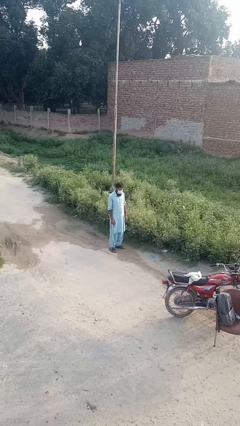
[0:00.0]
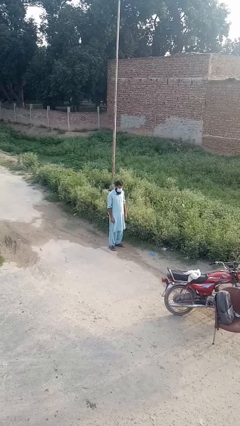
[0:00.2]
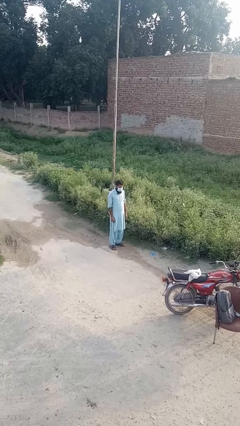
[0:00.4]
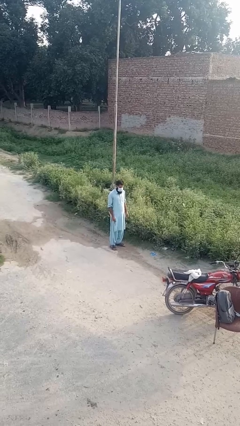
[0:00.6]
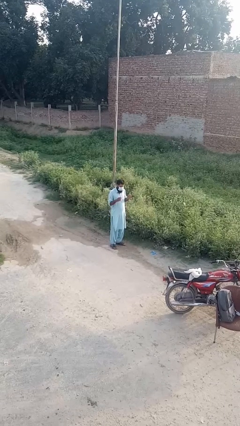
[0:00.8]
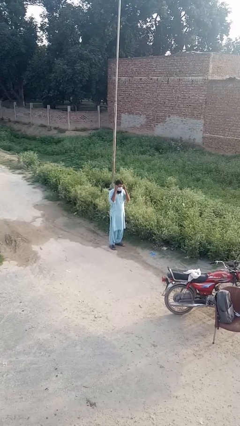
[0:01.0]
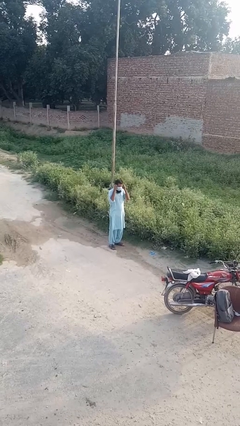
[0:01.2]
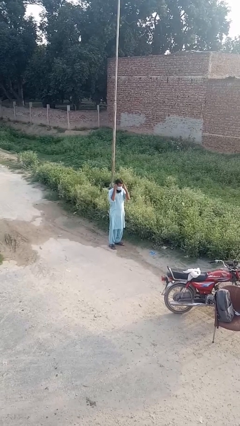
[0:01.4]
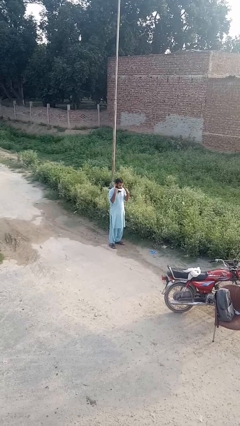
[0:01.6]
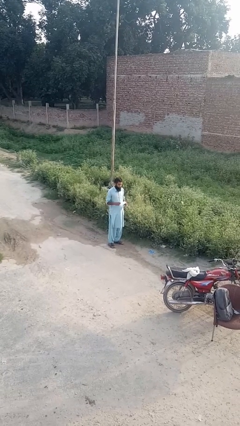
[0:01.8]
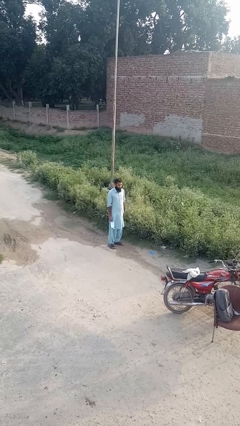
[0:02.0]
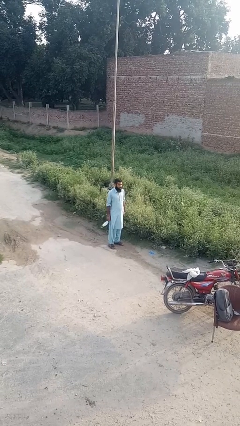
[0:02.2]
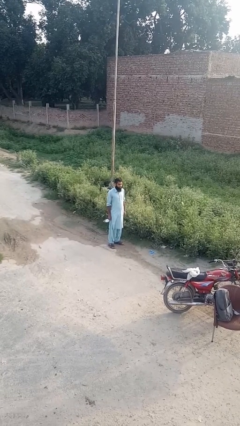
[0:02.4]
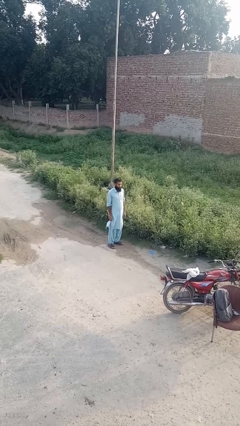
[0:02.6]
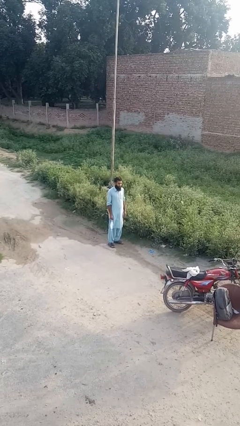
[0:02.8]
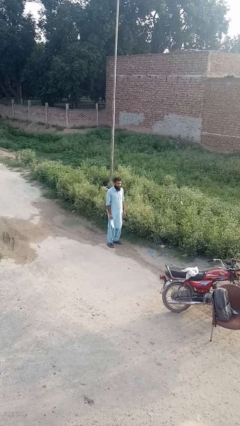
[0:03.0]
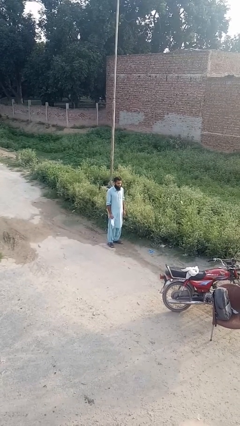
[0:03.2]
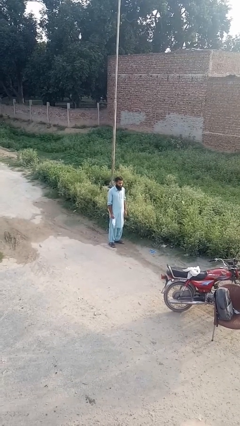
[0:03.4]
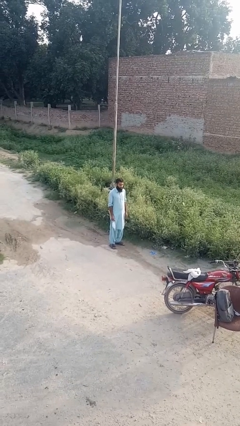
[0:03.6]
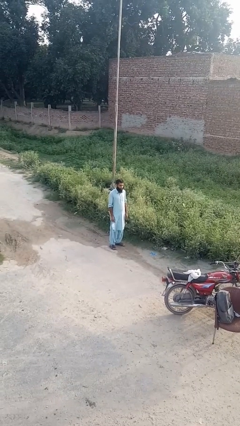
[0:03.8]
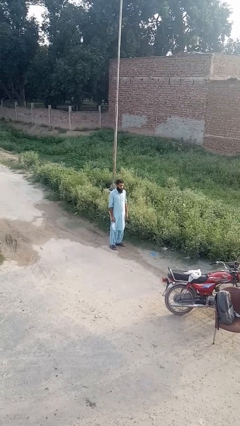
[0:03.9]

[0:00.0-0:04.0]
person takes off facemask

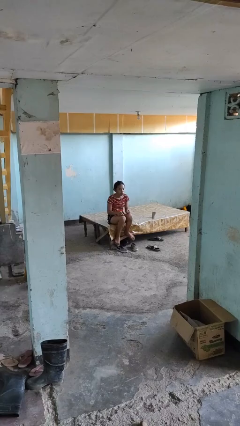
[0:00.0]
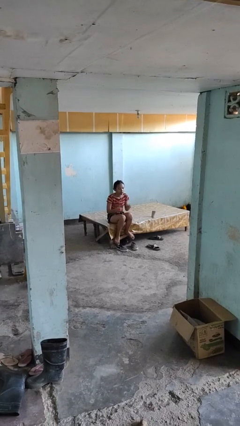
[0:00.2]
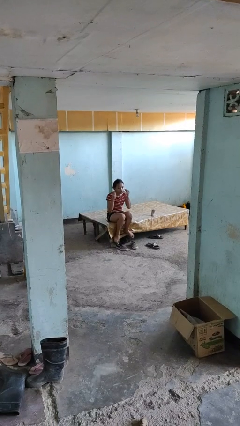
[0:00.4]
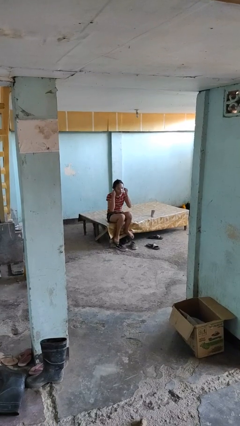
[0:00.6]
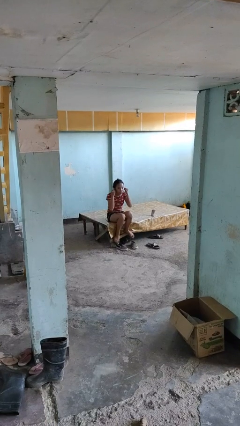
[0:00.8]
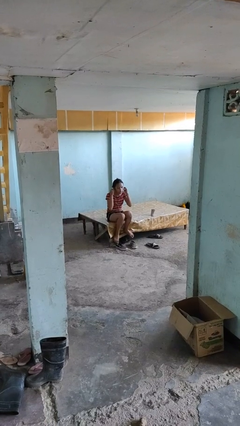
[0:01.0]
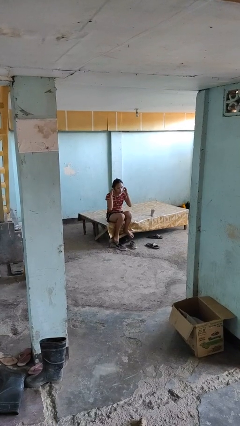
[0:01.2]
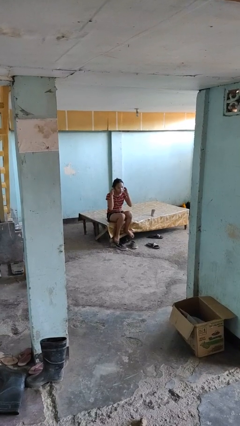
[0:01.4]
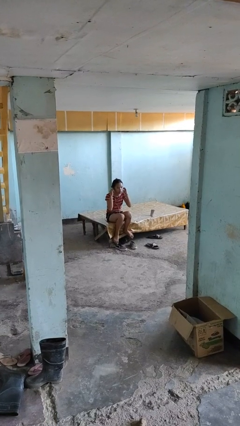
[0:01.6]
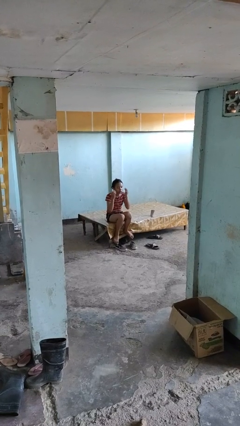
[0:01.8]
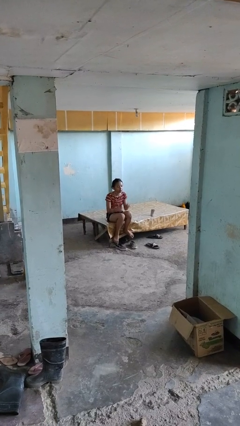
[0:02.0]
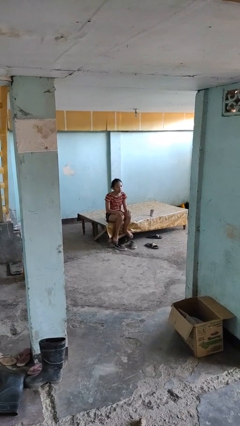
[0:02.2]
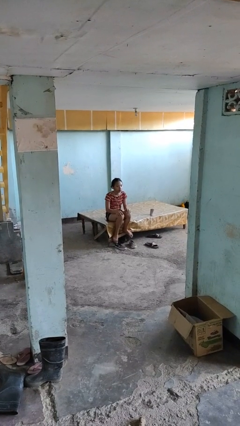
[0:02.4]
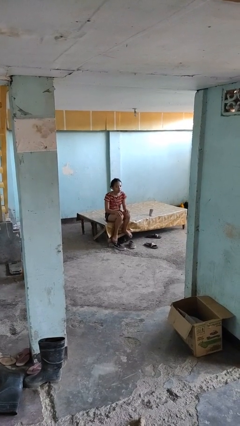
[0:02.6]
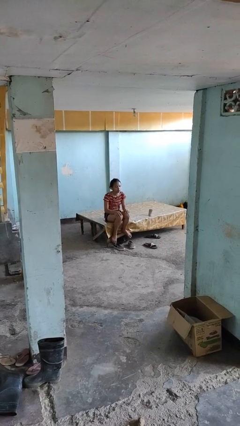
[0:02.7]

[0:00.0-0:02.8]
person puts on headphones

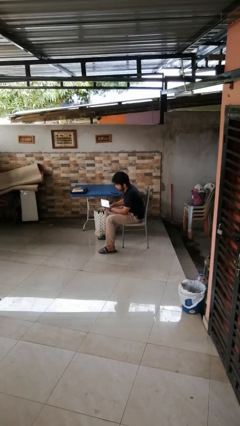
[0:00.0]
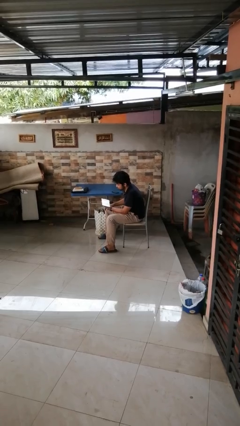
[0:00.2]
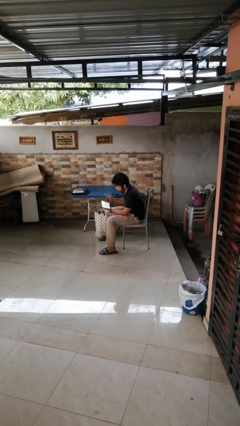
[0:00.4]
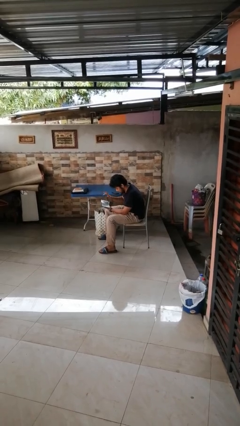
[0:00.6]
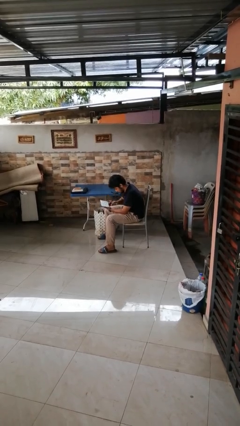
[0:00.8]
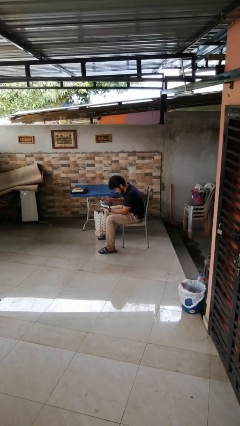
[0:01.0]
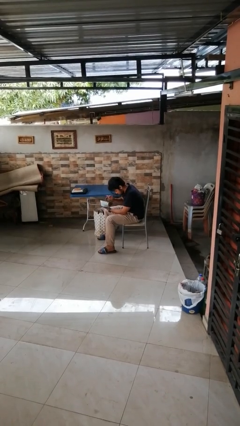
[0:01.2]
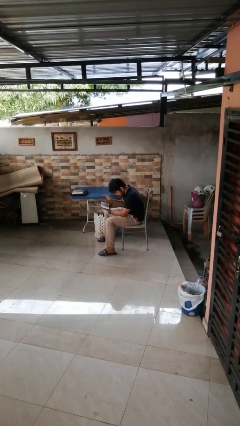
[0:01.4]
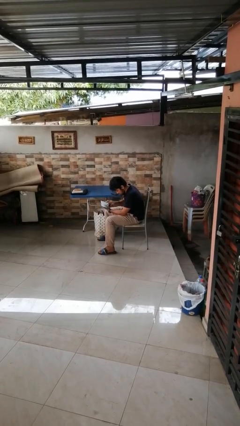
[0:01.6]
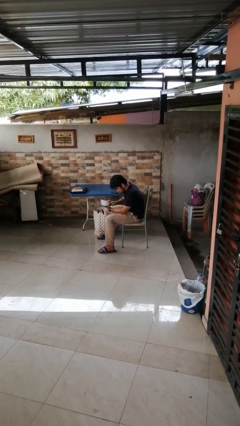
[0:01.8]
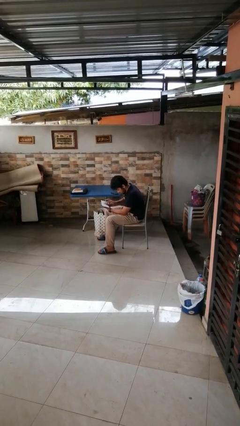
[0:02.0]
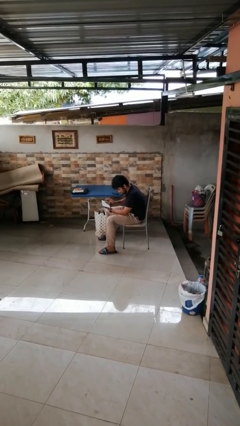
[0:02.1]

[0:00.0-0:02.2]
person interacts with tablet

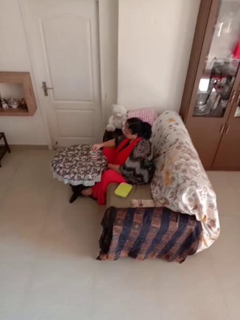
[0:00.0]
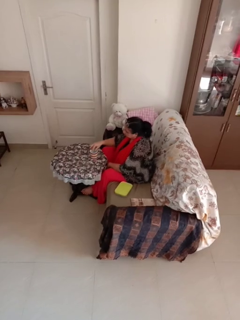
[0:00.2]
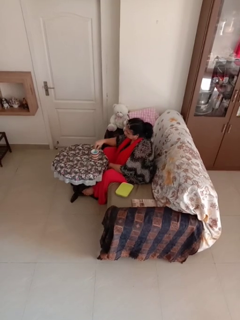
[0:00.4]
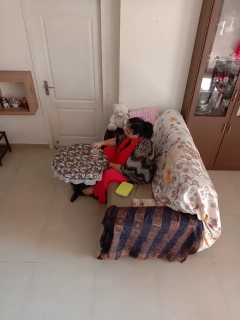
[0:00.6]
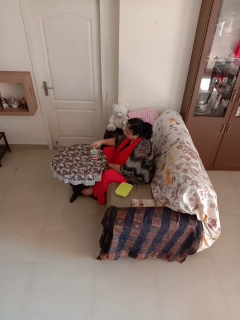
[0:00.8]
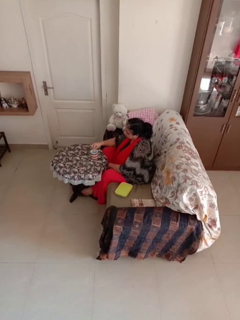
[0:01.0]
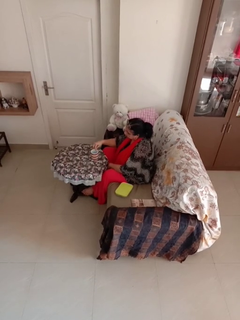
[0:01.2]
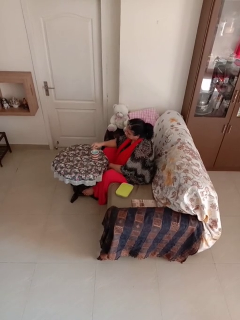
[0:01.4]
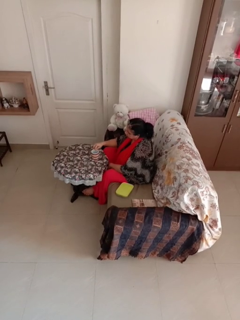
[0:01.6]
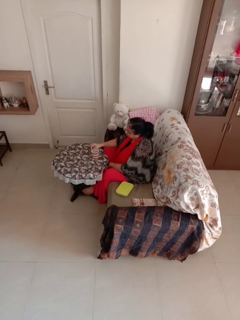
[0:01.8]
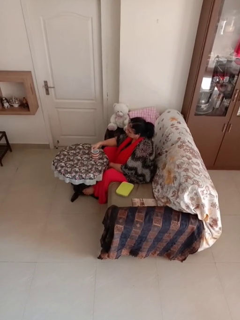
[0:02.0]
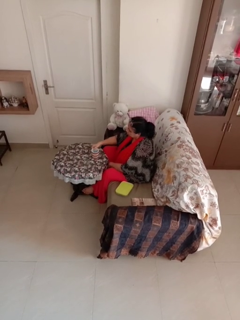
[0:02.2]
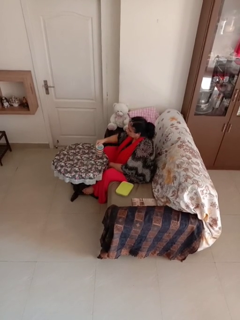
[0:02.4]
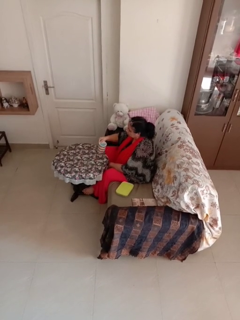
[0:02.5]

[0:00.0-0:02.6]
person stirs mug

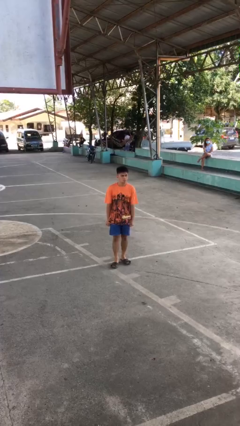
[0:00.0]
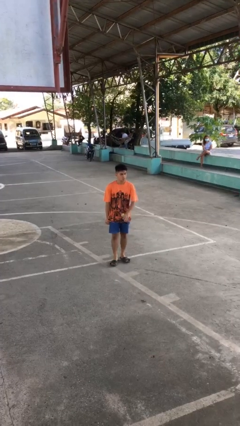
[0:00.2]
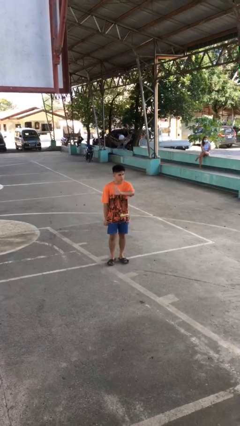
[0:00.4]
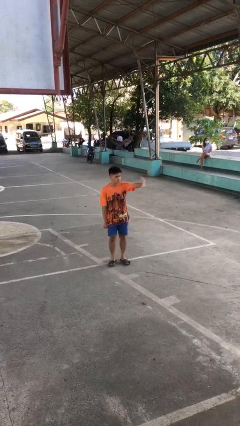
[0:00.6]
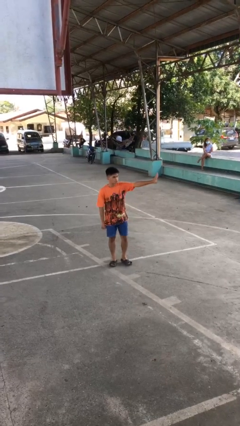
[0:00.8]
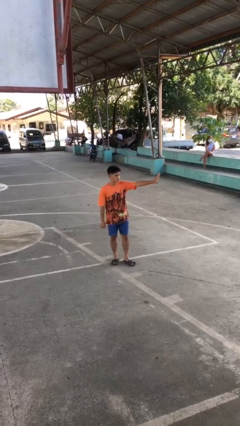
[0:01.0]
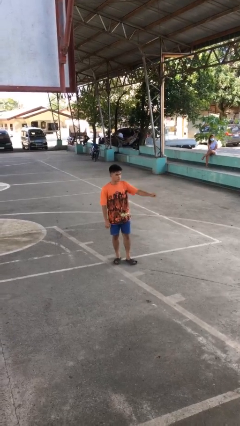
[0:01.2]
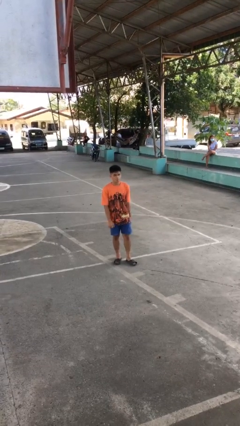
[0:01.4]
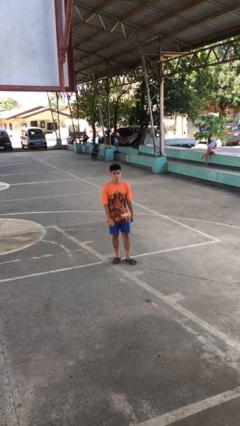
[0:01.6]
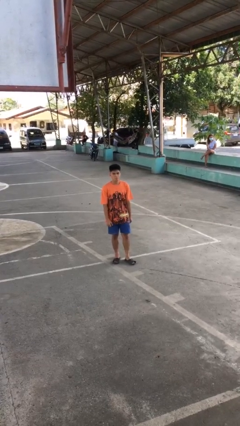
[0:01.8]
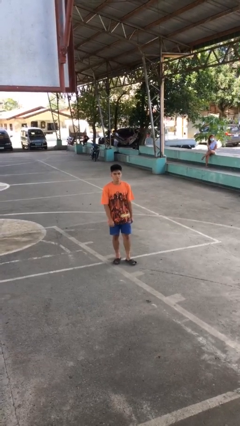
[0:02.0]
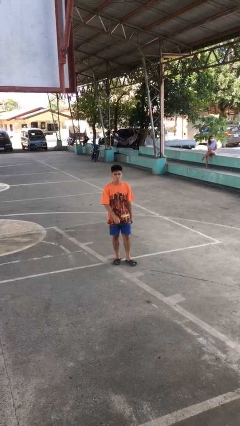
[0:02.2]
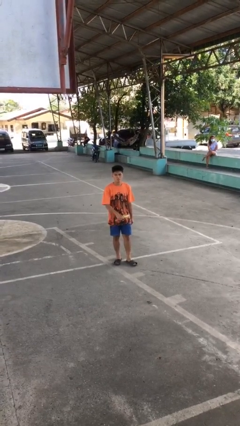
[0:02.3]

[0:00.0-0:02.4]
person gestures swipe left

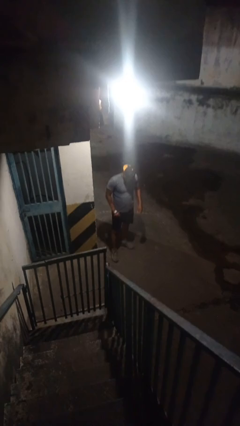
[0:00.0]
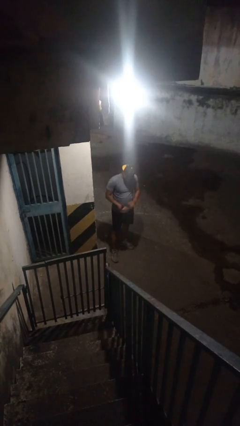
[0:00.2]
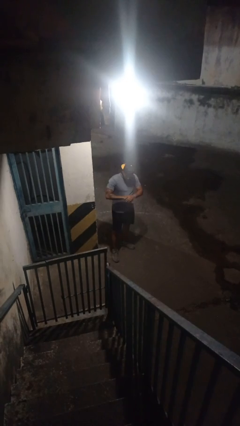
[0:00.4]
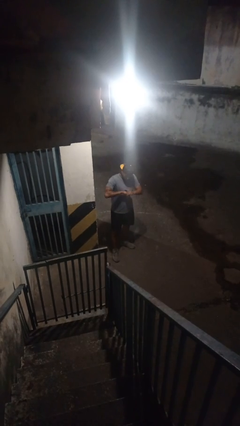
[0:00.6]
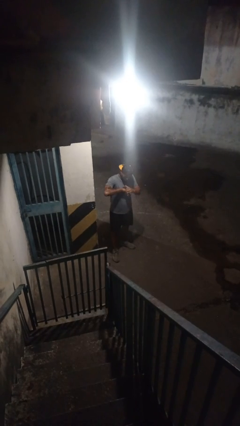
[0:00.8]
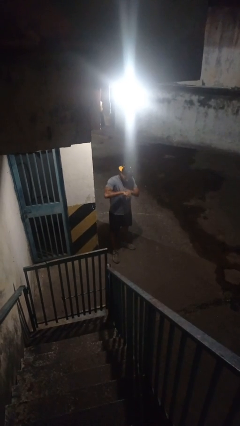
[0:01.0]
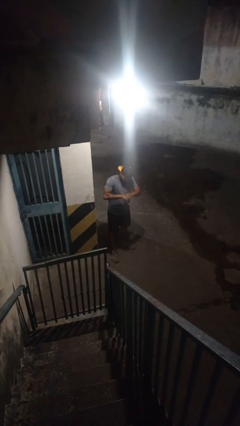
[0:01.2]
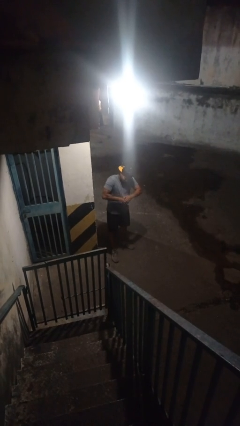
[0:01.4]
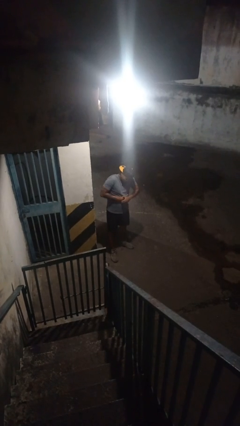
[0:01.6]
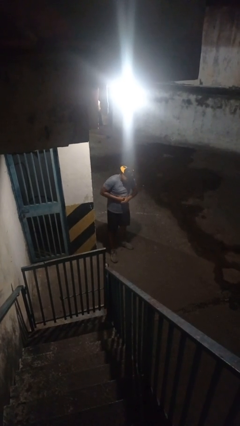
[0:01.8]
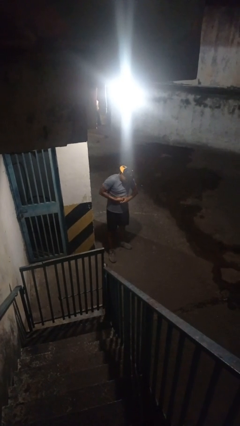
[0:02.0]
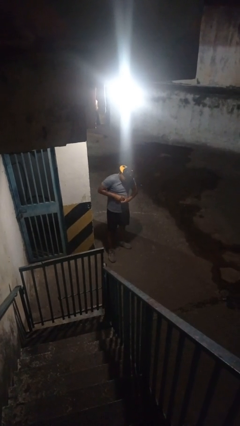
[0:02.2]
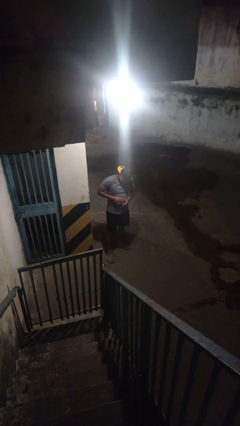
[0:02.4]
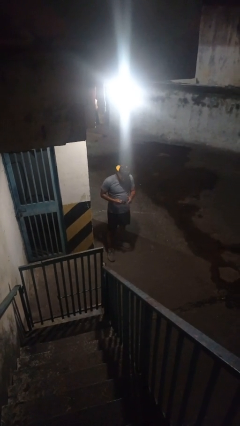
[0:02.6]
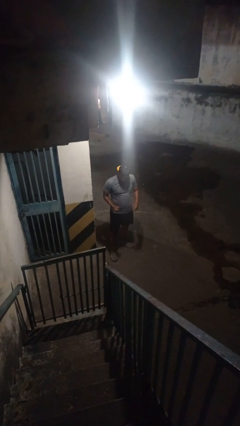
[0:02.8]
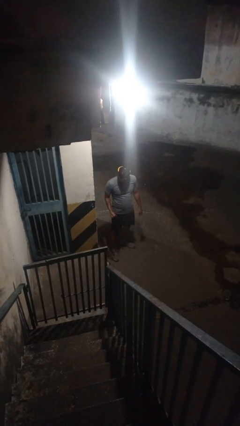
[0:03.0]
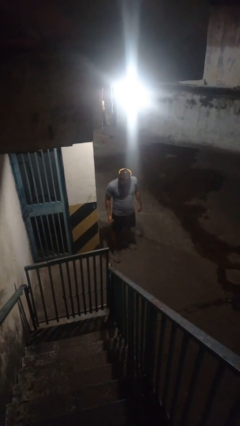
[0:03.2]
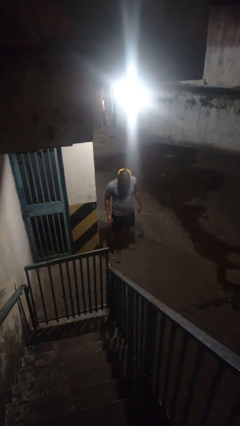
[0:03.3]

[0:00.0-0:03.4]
person takes off wristwatch

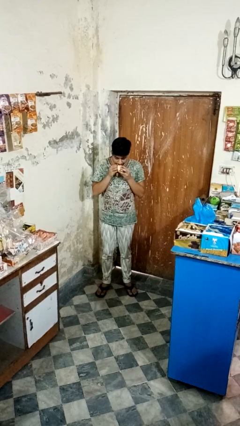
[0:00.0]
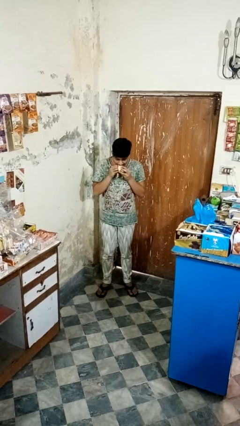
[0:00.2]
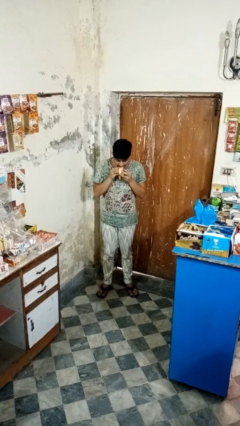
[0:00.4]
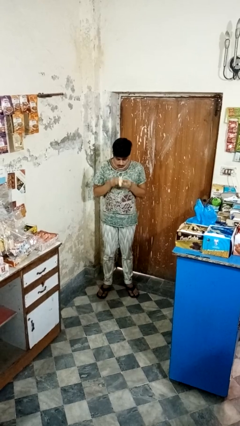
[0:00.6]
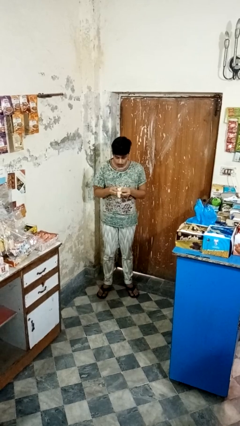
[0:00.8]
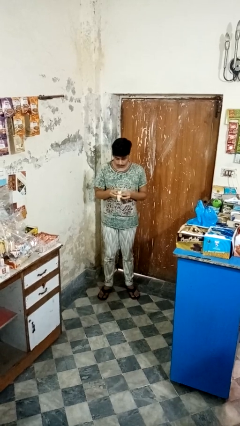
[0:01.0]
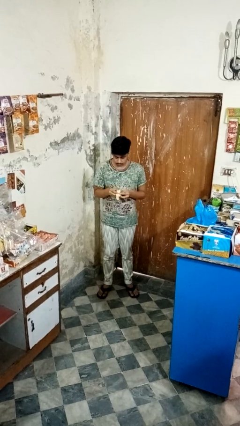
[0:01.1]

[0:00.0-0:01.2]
person eats banana
